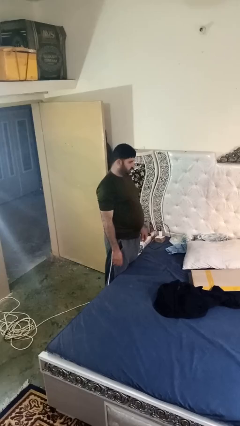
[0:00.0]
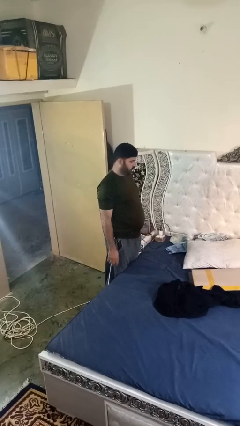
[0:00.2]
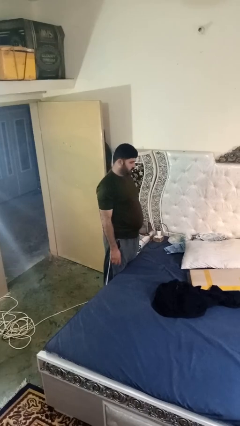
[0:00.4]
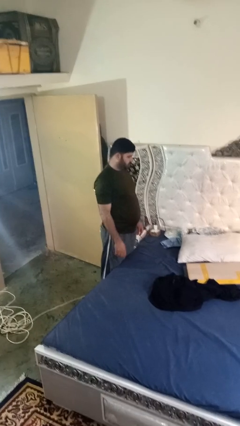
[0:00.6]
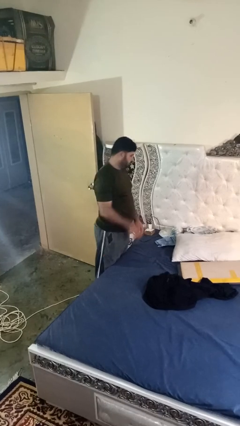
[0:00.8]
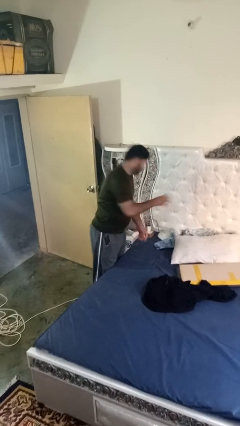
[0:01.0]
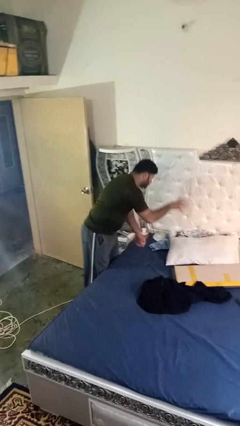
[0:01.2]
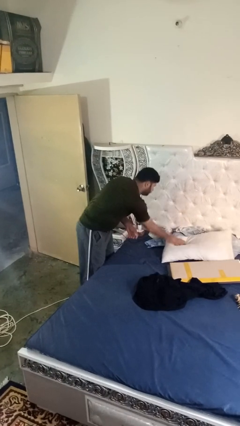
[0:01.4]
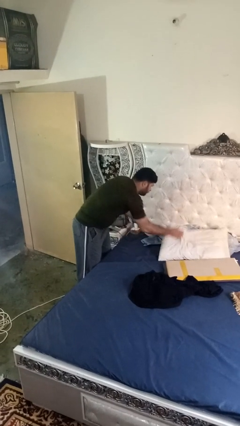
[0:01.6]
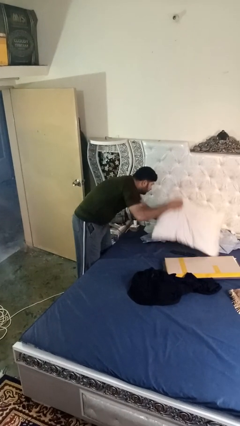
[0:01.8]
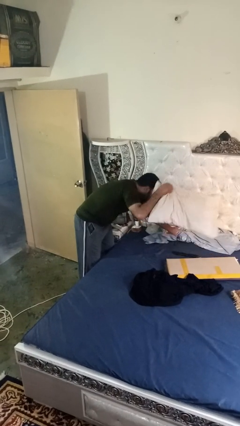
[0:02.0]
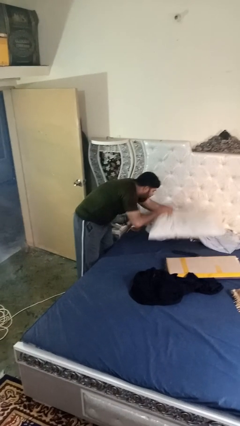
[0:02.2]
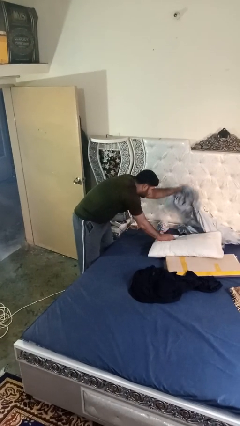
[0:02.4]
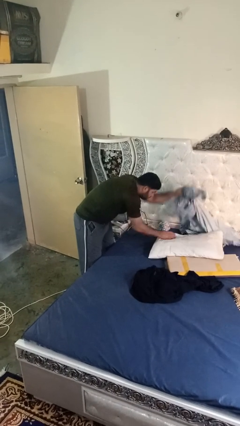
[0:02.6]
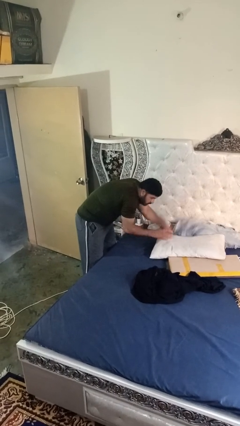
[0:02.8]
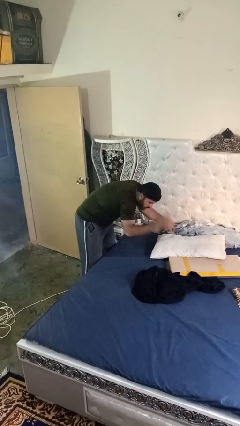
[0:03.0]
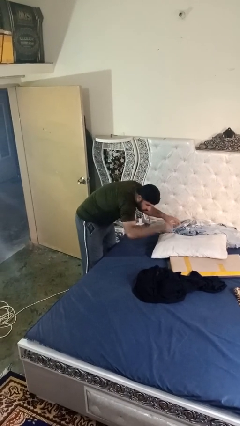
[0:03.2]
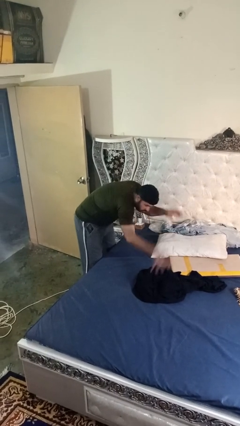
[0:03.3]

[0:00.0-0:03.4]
person searches under bed

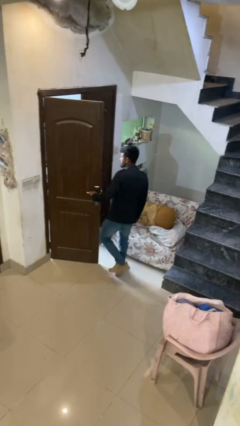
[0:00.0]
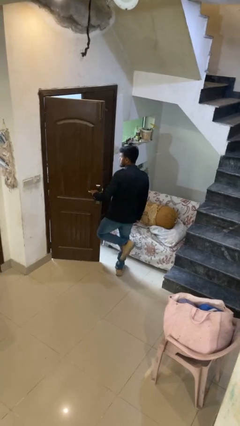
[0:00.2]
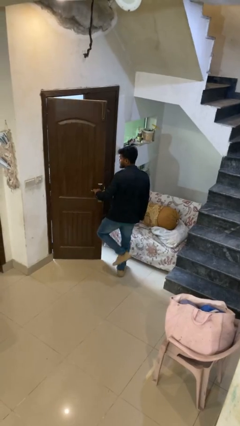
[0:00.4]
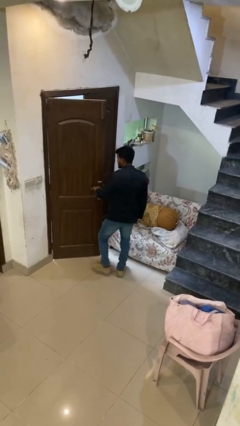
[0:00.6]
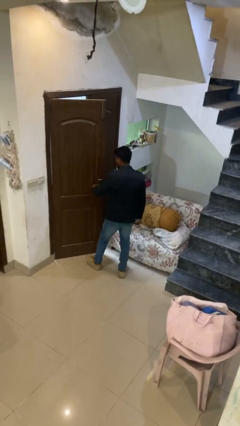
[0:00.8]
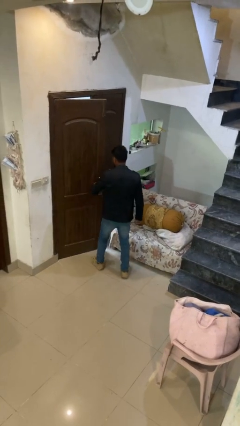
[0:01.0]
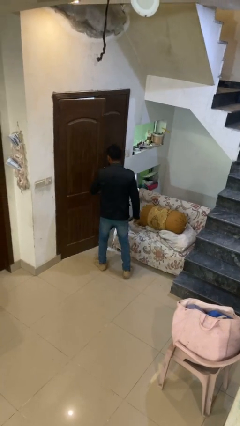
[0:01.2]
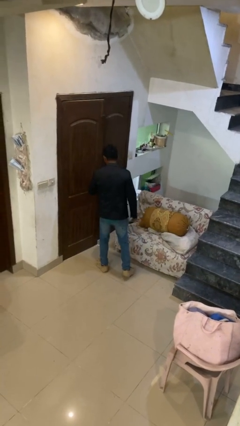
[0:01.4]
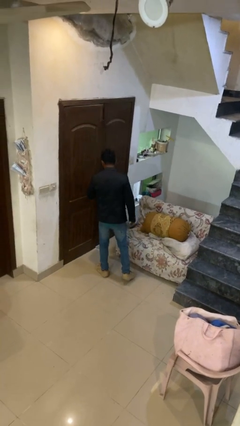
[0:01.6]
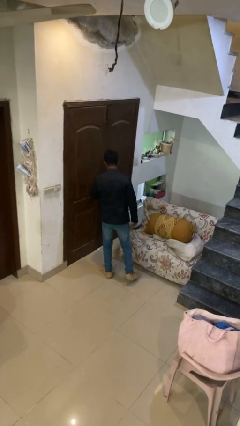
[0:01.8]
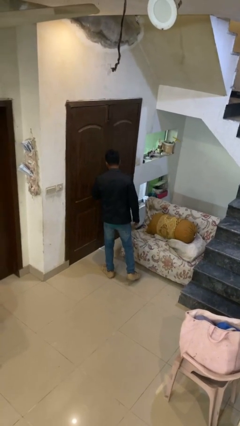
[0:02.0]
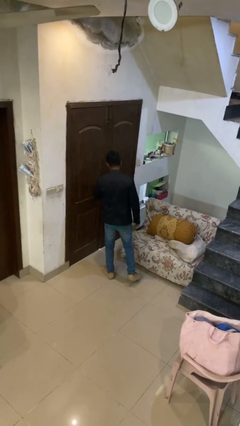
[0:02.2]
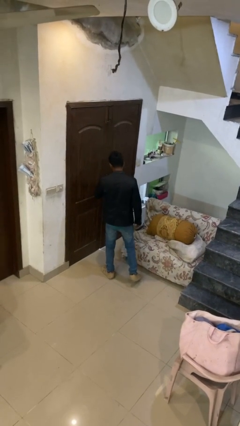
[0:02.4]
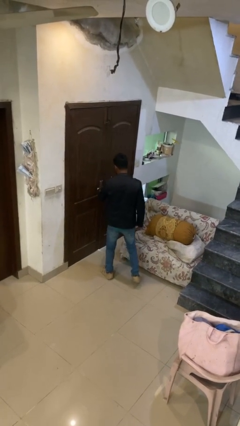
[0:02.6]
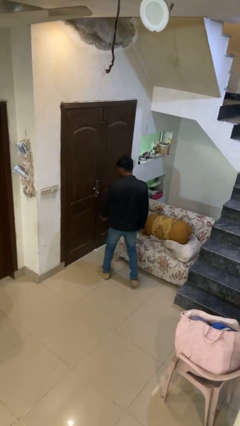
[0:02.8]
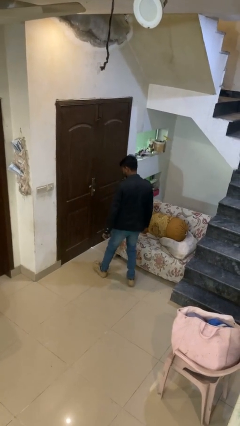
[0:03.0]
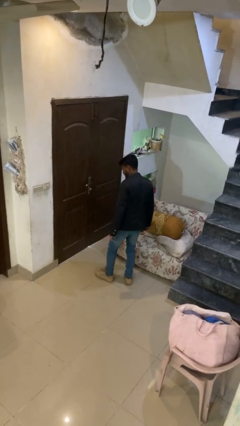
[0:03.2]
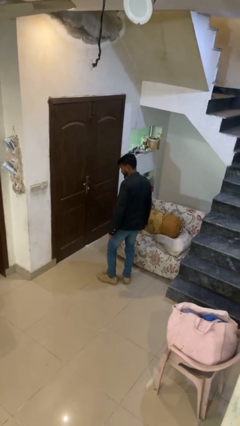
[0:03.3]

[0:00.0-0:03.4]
person closes facility door

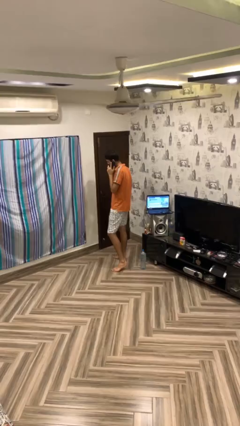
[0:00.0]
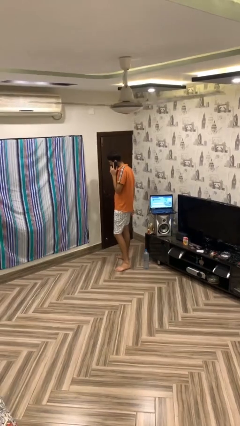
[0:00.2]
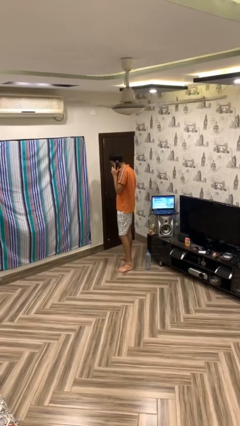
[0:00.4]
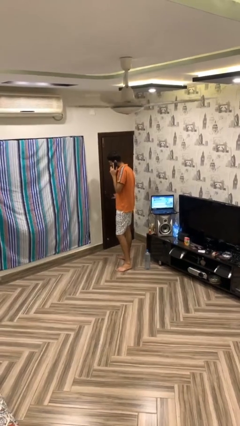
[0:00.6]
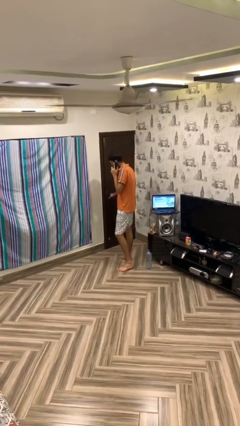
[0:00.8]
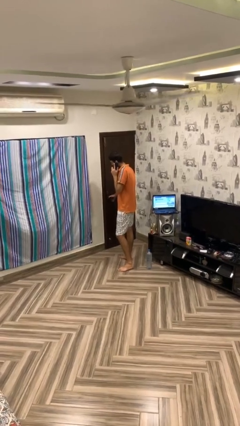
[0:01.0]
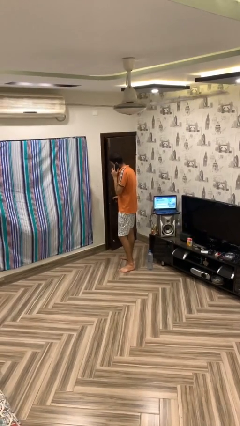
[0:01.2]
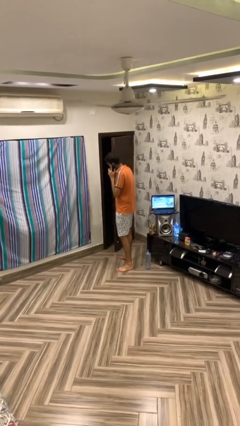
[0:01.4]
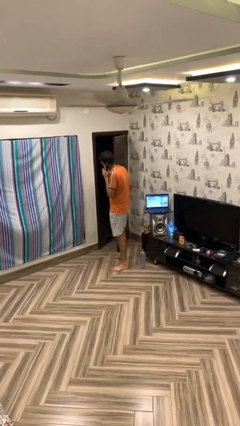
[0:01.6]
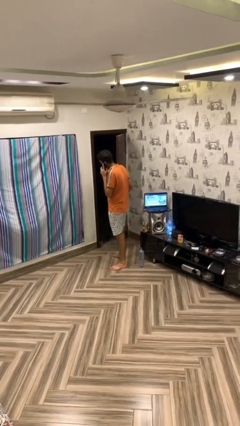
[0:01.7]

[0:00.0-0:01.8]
person opens facility door

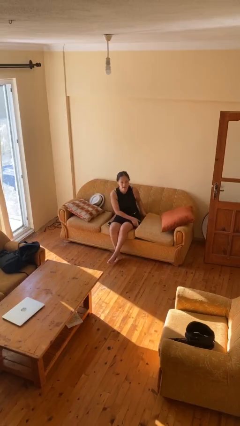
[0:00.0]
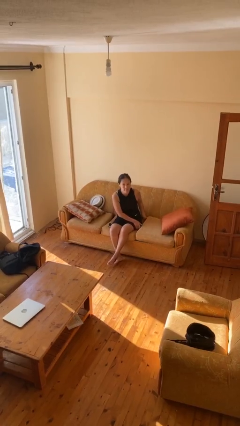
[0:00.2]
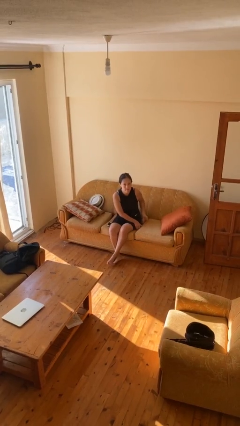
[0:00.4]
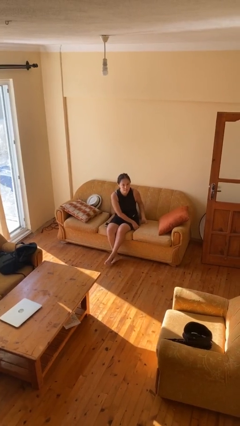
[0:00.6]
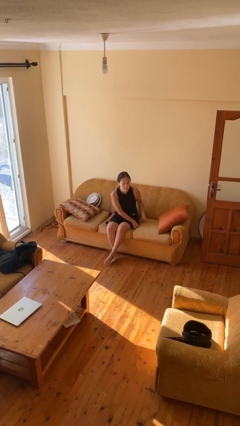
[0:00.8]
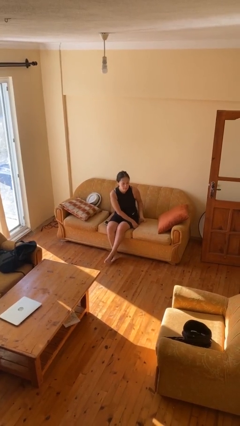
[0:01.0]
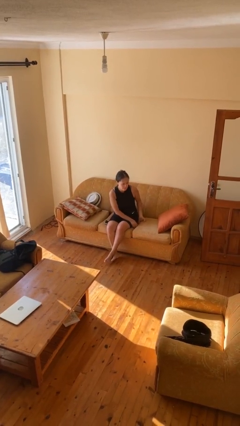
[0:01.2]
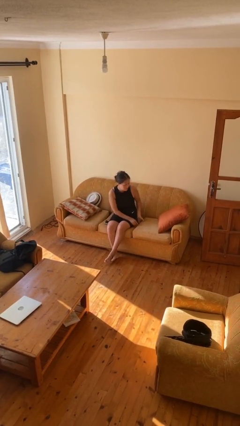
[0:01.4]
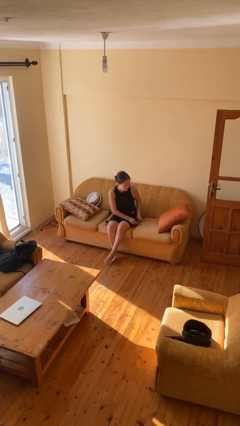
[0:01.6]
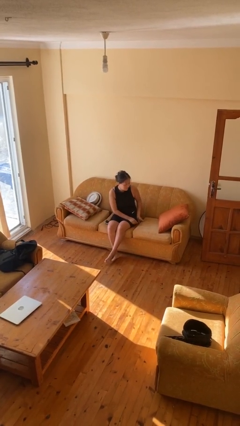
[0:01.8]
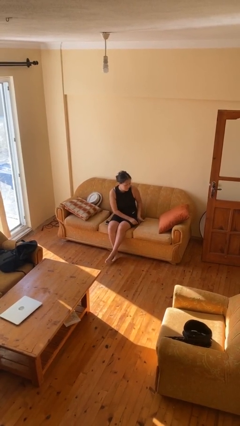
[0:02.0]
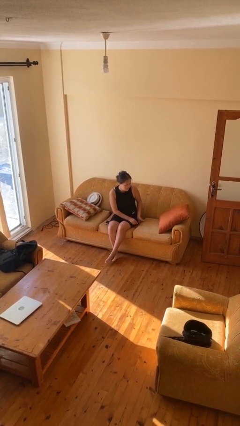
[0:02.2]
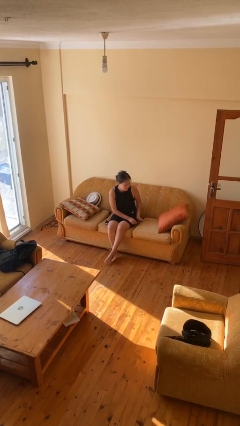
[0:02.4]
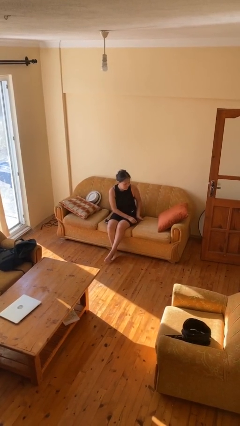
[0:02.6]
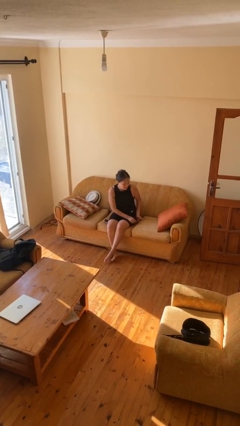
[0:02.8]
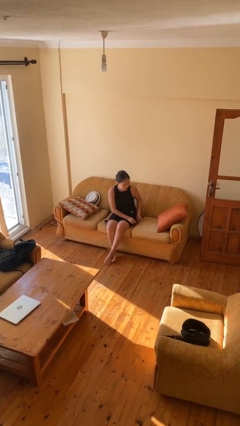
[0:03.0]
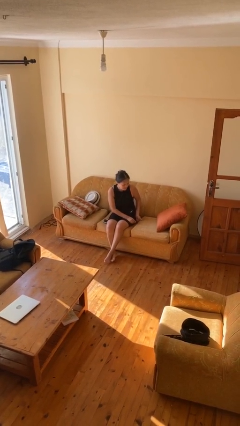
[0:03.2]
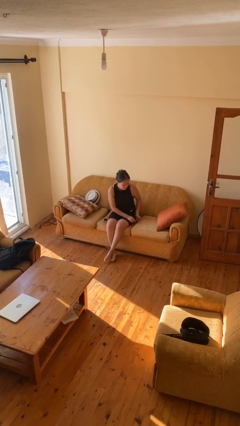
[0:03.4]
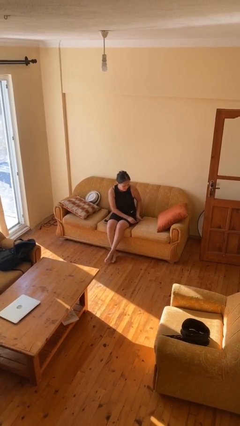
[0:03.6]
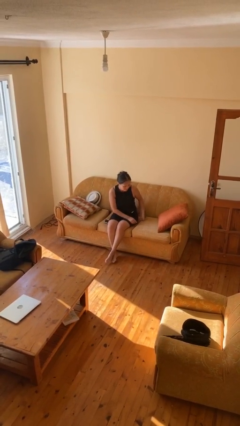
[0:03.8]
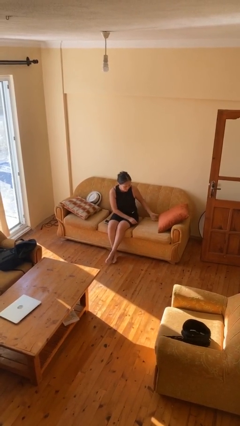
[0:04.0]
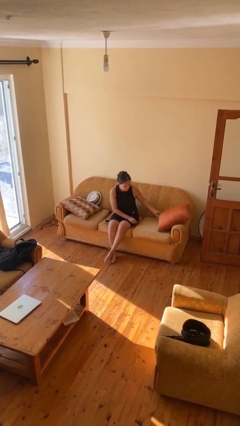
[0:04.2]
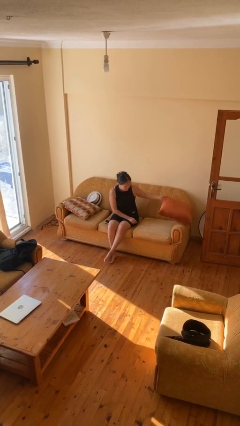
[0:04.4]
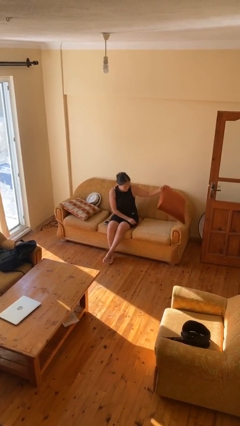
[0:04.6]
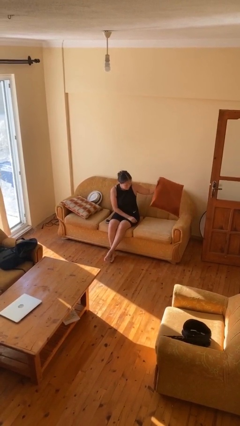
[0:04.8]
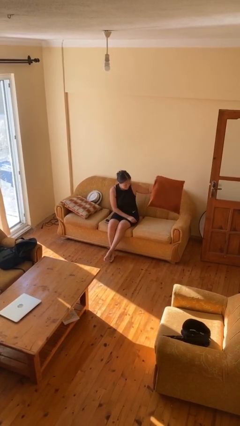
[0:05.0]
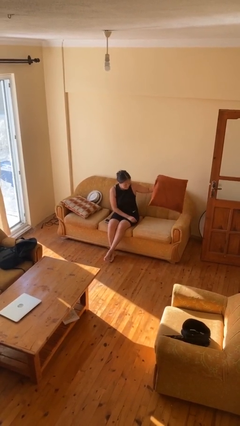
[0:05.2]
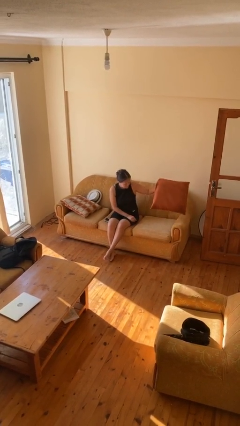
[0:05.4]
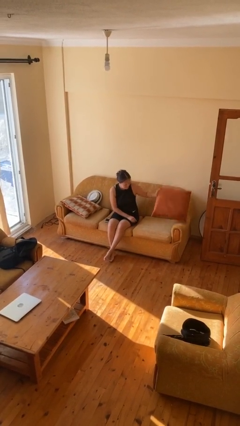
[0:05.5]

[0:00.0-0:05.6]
person searches in couch

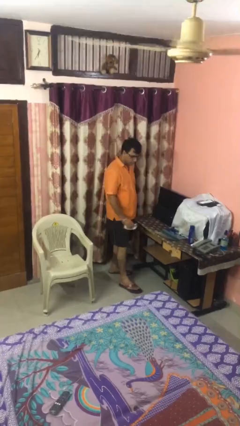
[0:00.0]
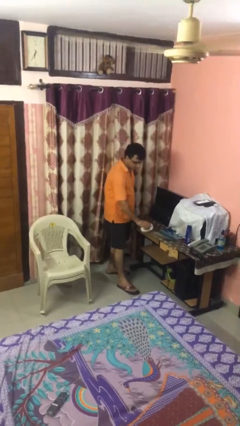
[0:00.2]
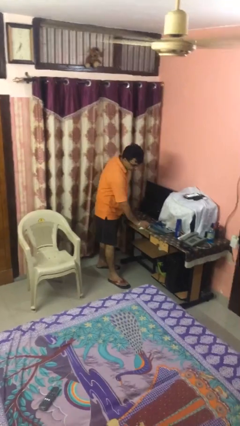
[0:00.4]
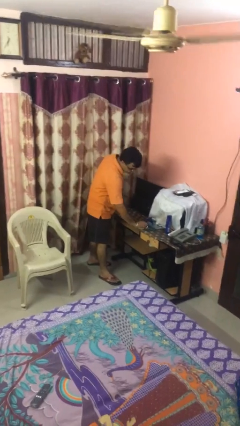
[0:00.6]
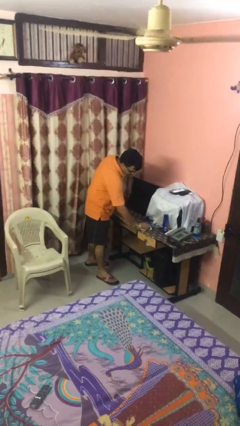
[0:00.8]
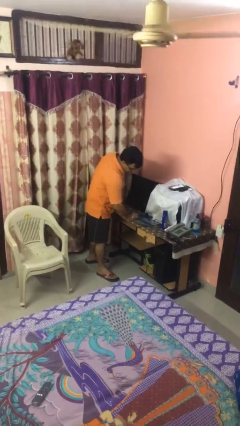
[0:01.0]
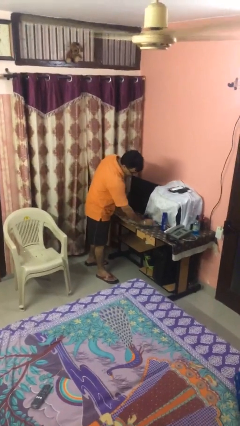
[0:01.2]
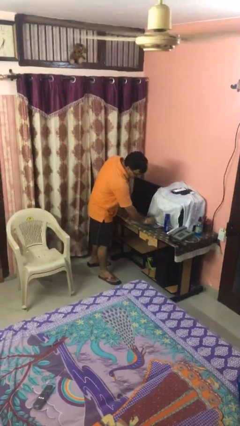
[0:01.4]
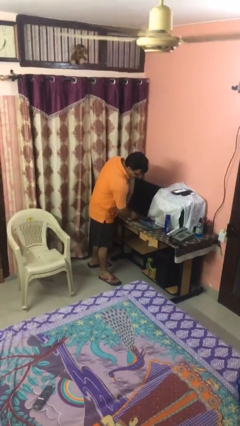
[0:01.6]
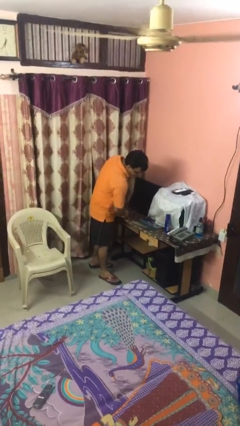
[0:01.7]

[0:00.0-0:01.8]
person cleans table with rag

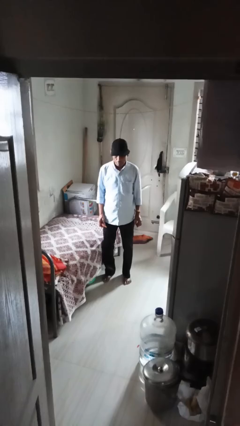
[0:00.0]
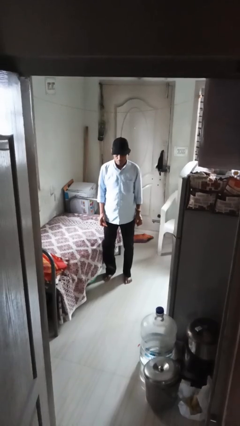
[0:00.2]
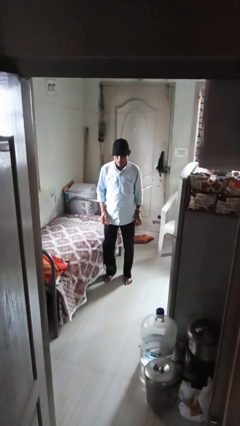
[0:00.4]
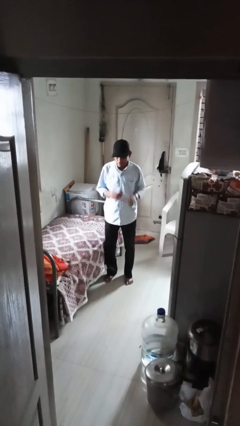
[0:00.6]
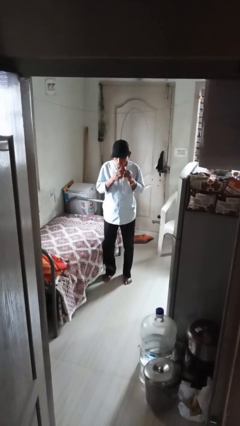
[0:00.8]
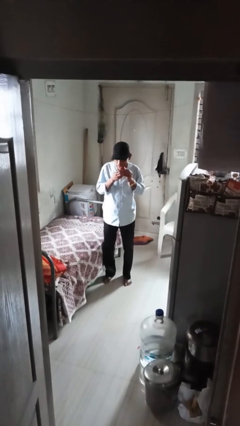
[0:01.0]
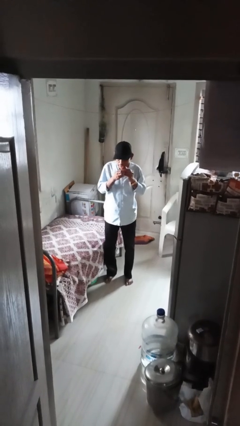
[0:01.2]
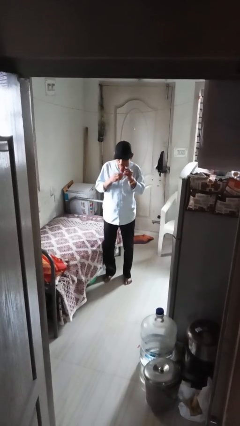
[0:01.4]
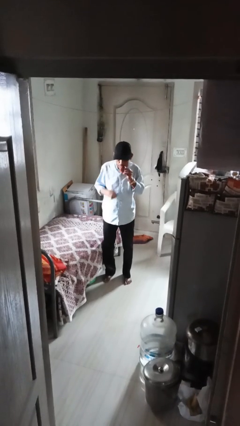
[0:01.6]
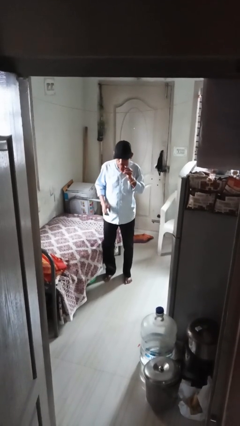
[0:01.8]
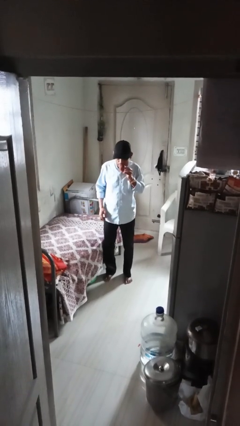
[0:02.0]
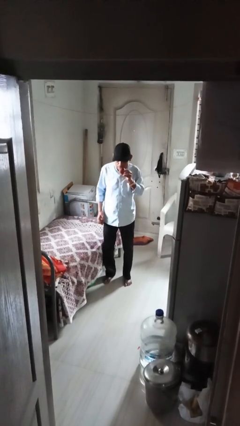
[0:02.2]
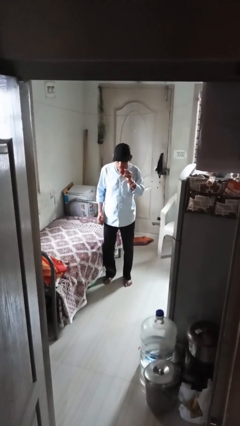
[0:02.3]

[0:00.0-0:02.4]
person eats apple
